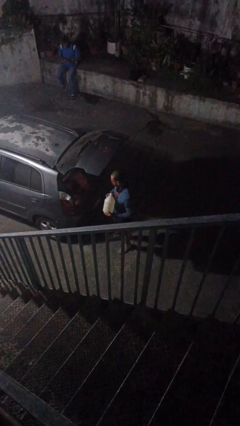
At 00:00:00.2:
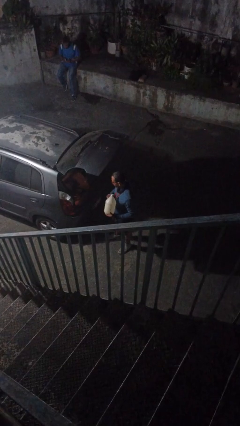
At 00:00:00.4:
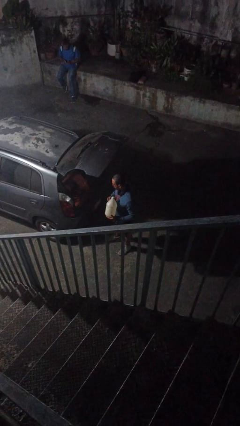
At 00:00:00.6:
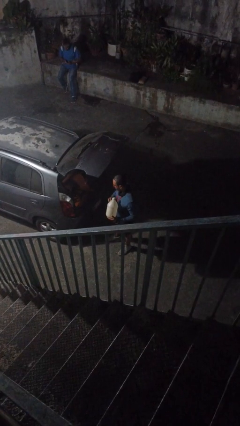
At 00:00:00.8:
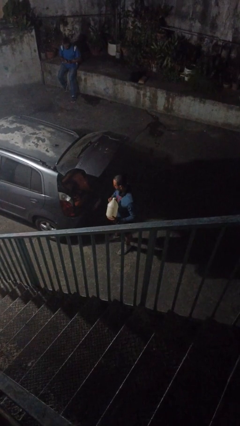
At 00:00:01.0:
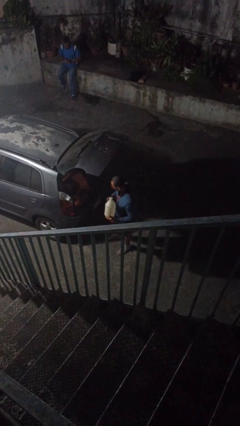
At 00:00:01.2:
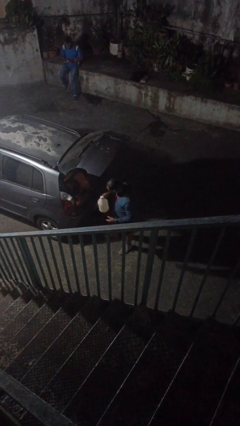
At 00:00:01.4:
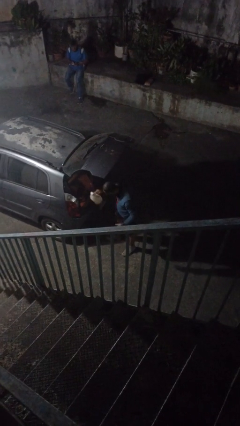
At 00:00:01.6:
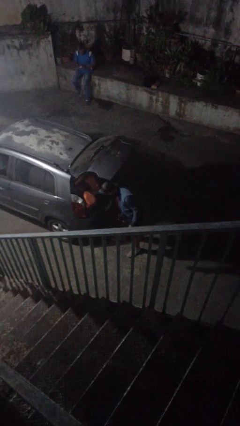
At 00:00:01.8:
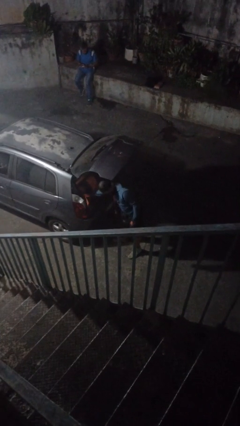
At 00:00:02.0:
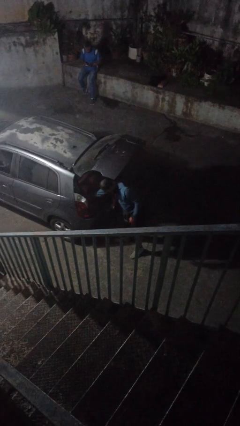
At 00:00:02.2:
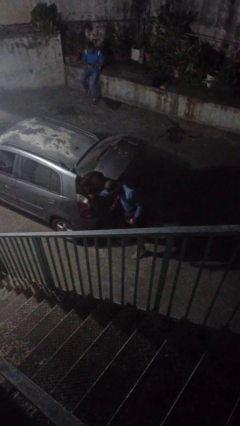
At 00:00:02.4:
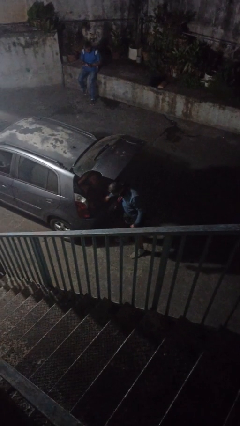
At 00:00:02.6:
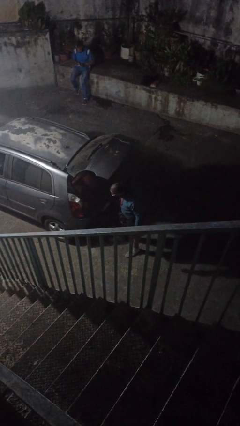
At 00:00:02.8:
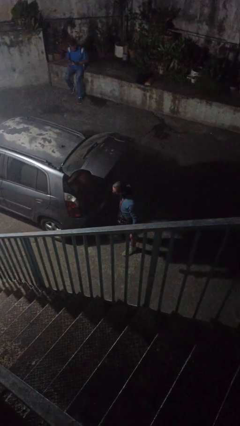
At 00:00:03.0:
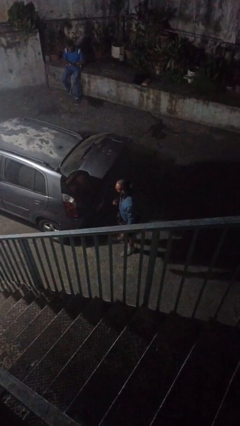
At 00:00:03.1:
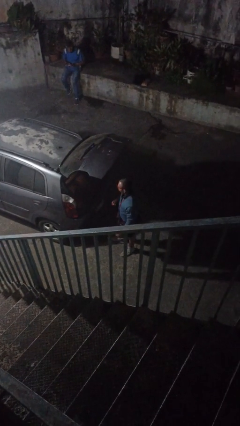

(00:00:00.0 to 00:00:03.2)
person loads car

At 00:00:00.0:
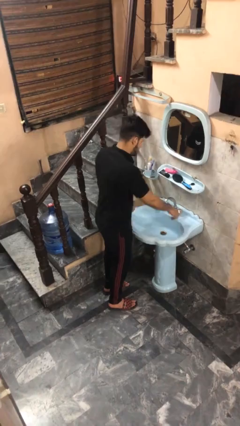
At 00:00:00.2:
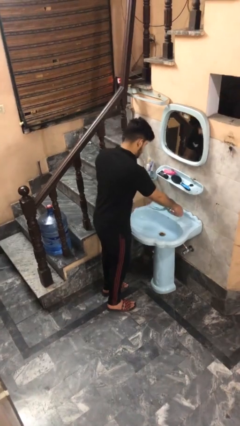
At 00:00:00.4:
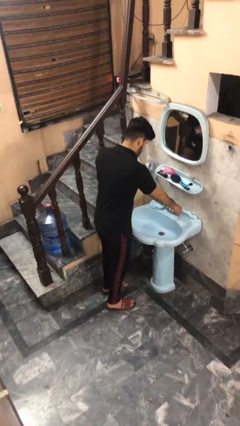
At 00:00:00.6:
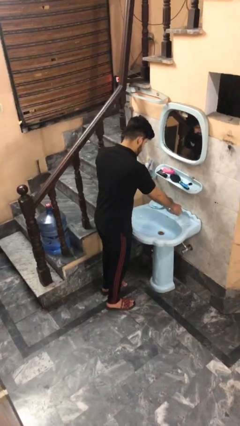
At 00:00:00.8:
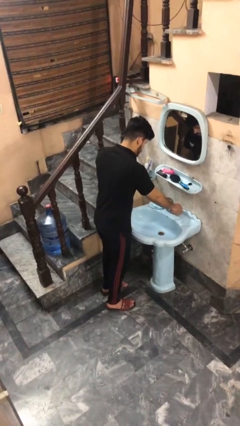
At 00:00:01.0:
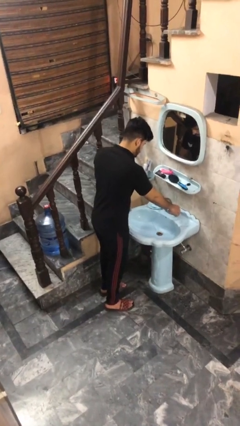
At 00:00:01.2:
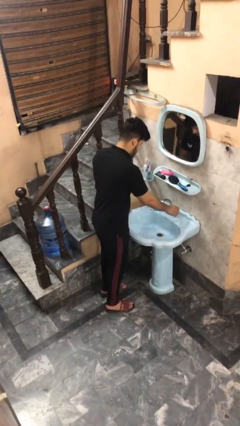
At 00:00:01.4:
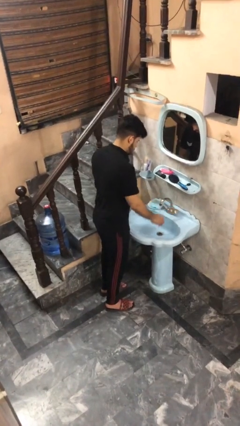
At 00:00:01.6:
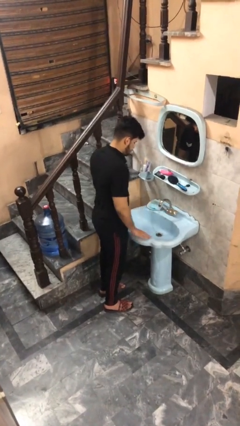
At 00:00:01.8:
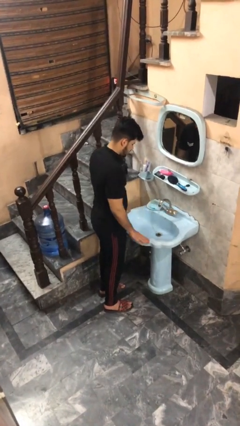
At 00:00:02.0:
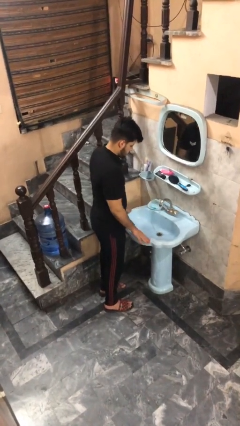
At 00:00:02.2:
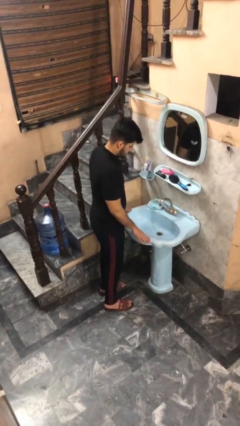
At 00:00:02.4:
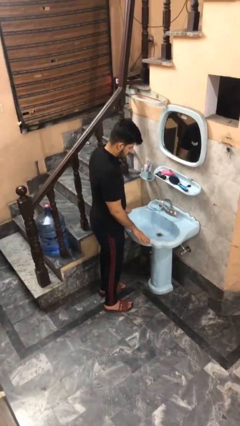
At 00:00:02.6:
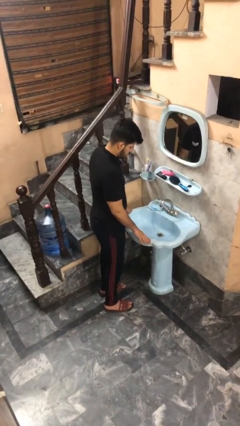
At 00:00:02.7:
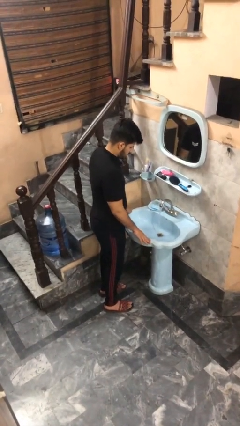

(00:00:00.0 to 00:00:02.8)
person turns on faucet

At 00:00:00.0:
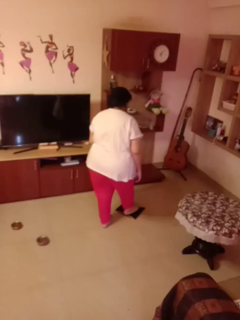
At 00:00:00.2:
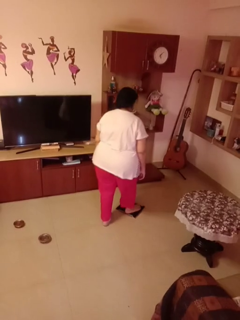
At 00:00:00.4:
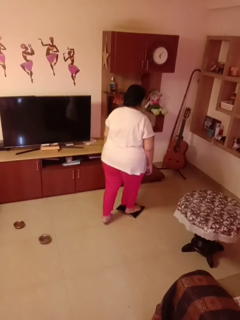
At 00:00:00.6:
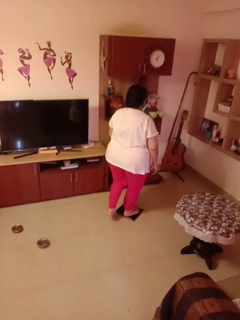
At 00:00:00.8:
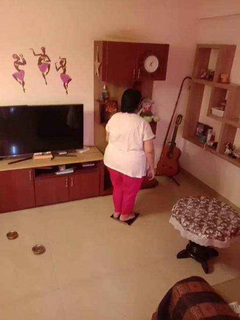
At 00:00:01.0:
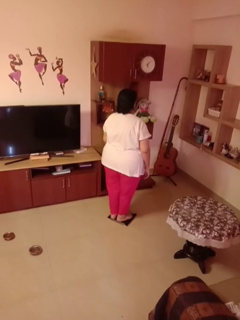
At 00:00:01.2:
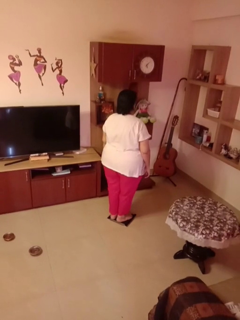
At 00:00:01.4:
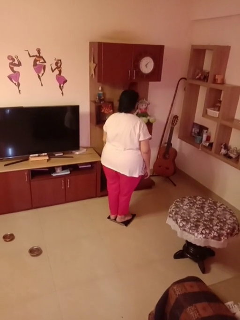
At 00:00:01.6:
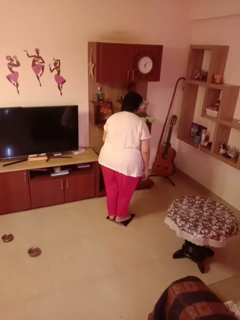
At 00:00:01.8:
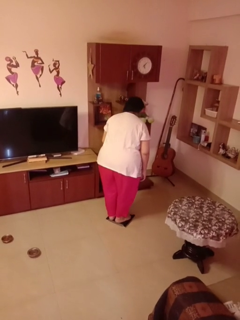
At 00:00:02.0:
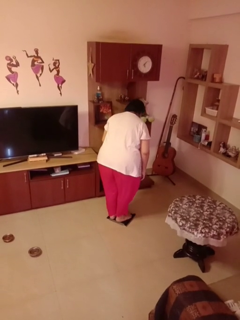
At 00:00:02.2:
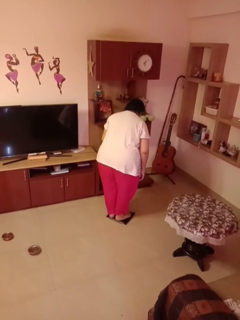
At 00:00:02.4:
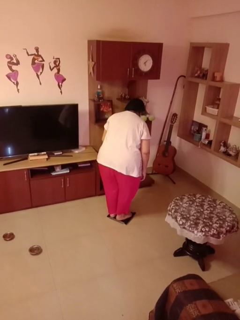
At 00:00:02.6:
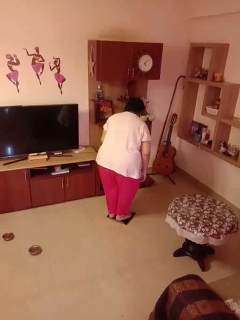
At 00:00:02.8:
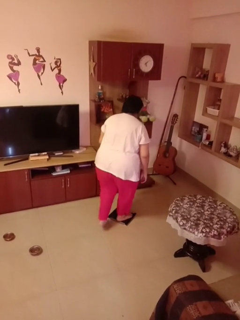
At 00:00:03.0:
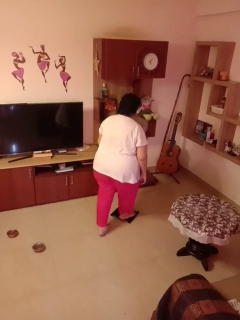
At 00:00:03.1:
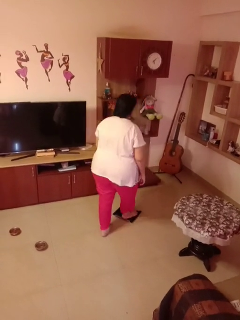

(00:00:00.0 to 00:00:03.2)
person uses bodyweight scale

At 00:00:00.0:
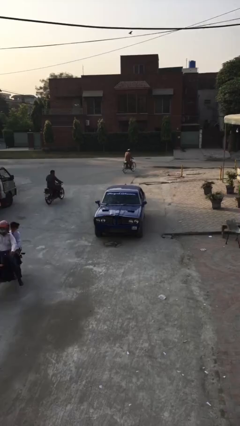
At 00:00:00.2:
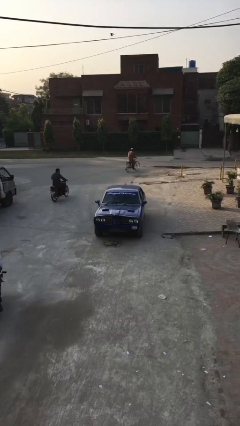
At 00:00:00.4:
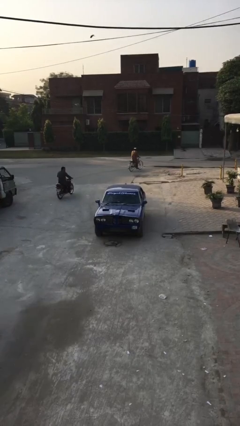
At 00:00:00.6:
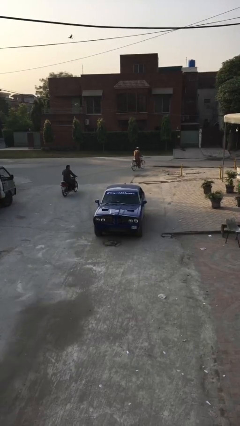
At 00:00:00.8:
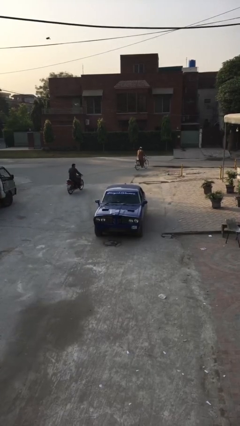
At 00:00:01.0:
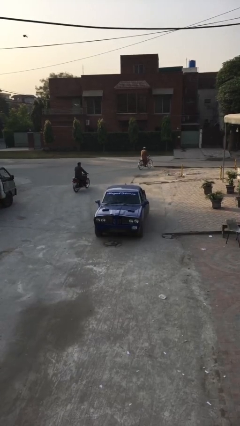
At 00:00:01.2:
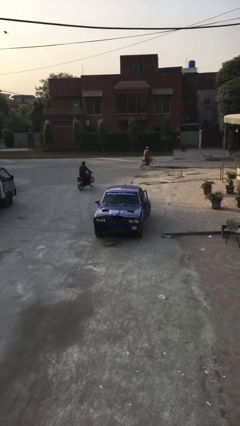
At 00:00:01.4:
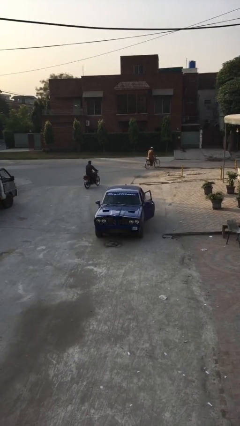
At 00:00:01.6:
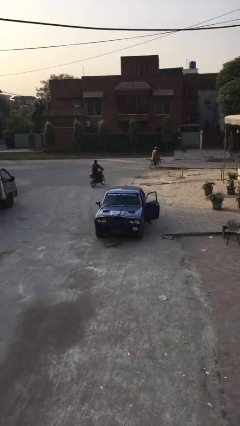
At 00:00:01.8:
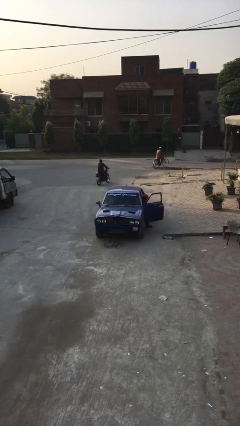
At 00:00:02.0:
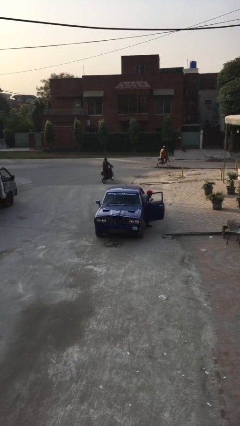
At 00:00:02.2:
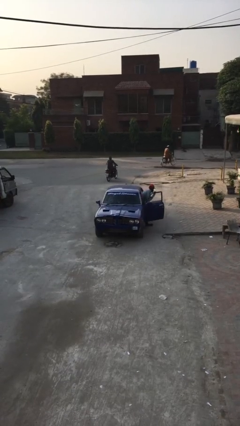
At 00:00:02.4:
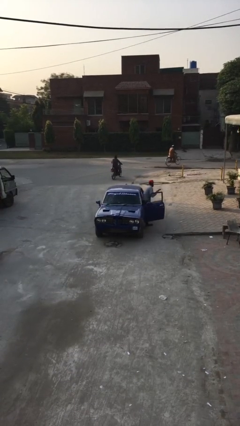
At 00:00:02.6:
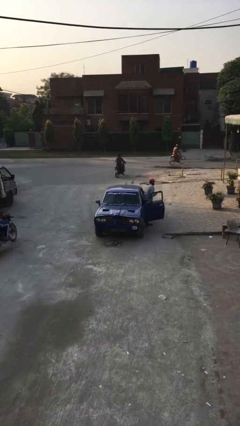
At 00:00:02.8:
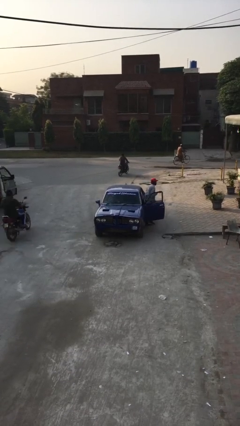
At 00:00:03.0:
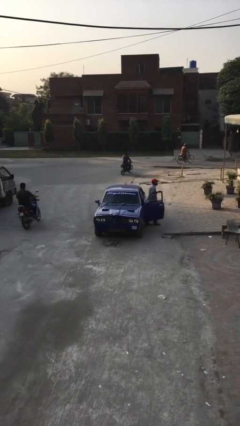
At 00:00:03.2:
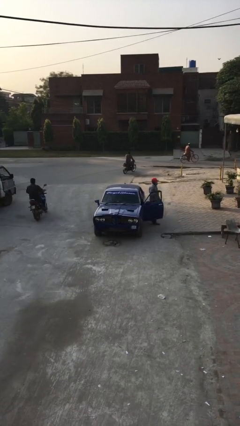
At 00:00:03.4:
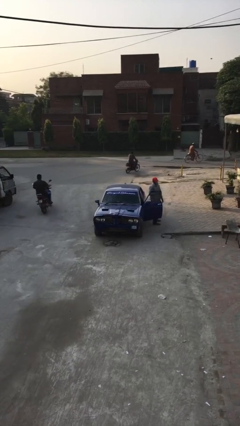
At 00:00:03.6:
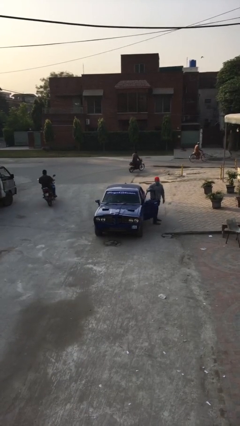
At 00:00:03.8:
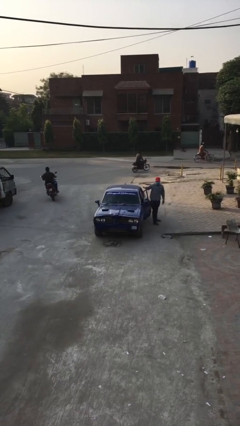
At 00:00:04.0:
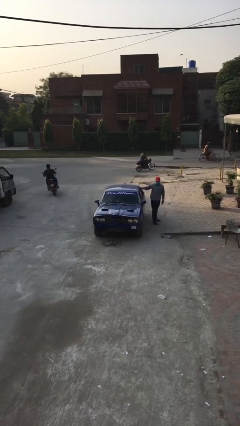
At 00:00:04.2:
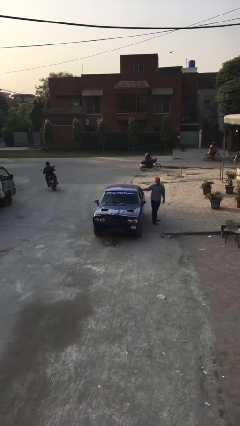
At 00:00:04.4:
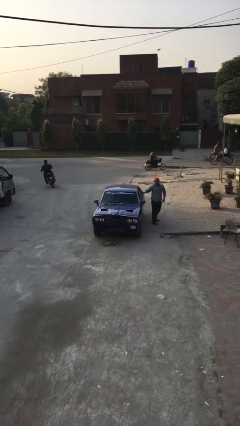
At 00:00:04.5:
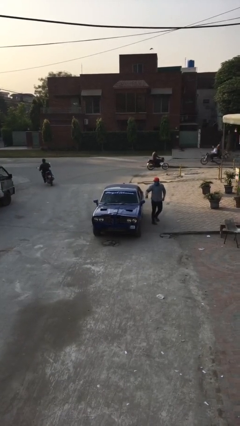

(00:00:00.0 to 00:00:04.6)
car drops off person

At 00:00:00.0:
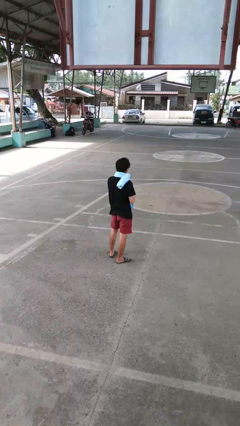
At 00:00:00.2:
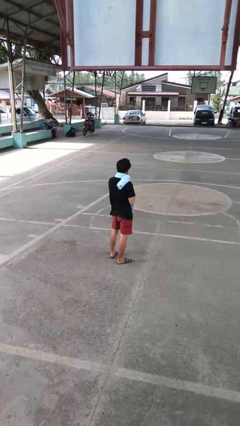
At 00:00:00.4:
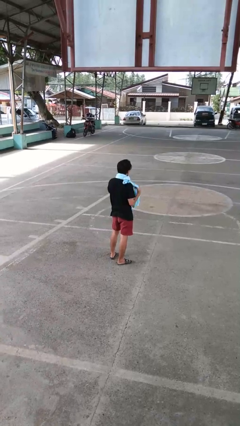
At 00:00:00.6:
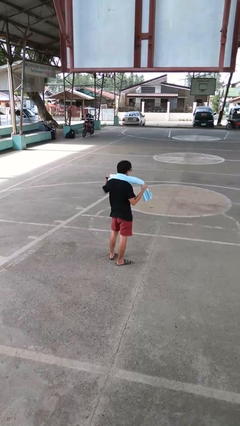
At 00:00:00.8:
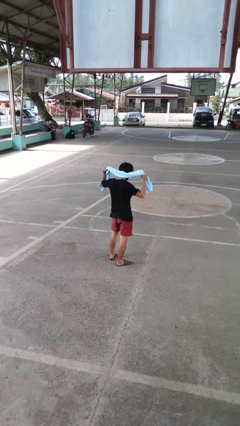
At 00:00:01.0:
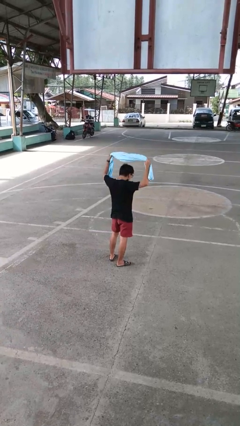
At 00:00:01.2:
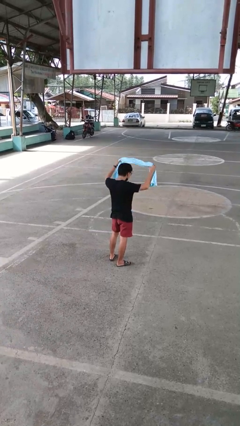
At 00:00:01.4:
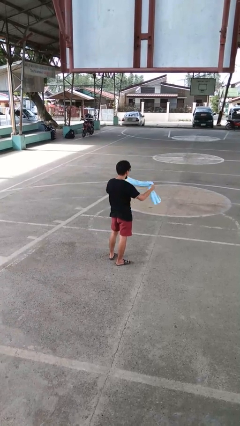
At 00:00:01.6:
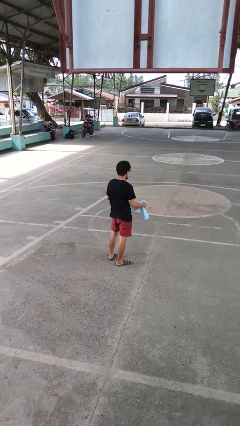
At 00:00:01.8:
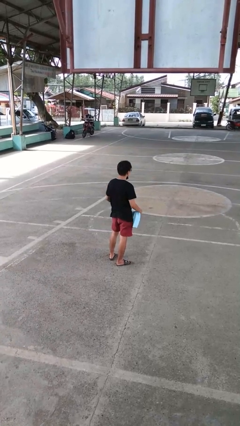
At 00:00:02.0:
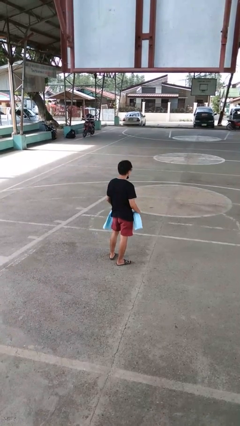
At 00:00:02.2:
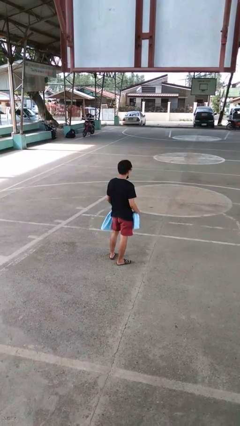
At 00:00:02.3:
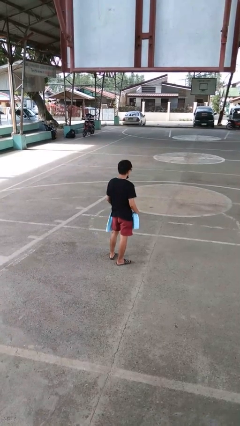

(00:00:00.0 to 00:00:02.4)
person takes off scarf

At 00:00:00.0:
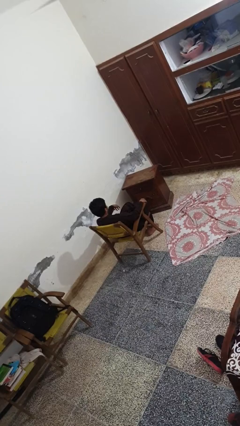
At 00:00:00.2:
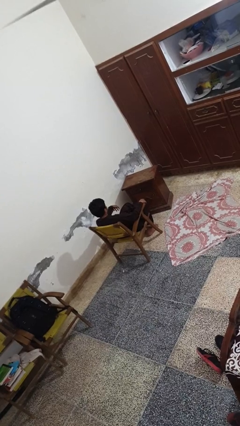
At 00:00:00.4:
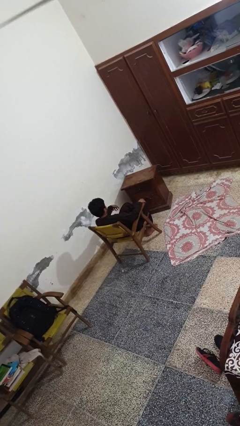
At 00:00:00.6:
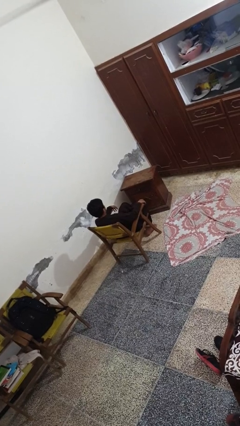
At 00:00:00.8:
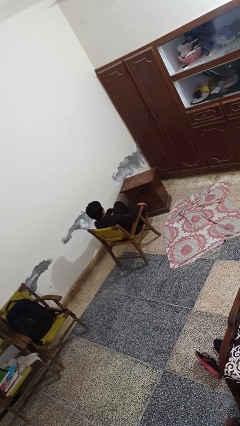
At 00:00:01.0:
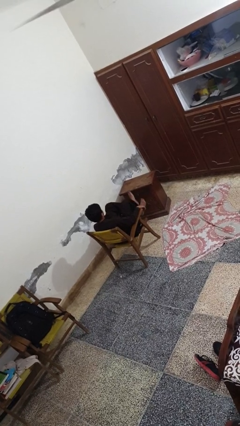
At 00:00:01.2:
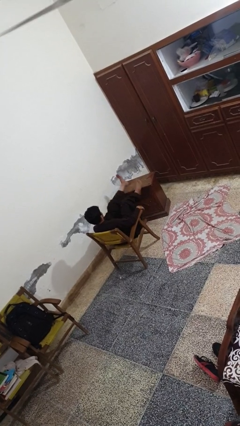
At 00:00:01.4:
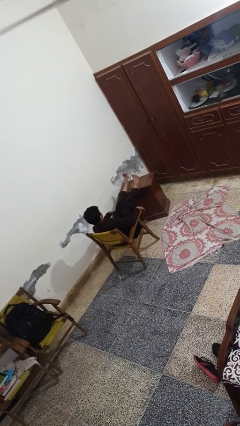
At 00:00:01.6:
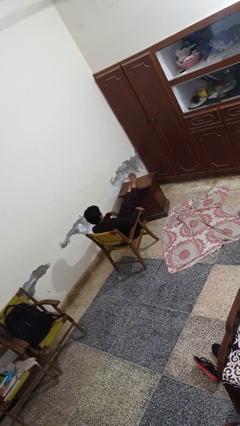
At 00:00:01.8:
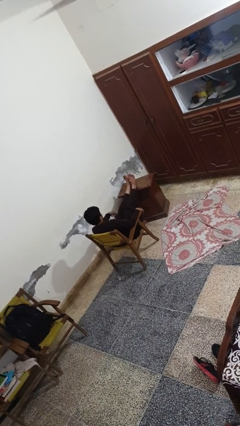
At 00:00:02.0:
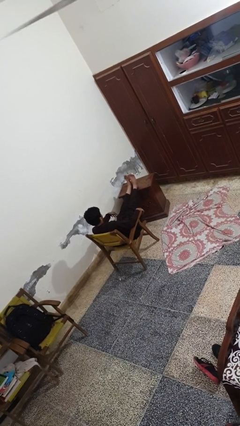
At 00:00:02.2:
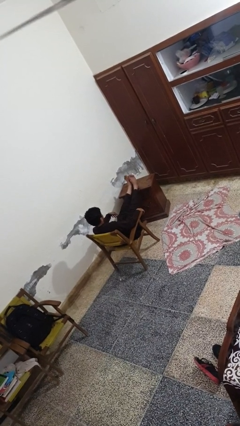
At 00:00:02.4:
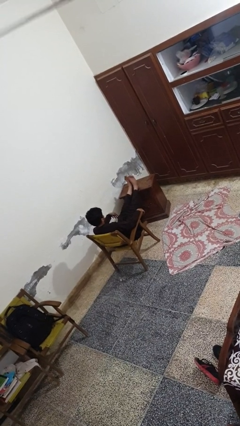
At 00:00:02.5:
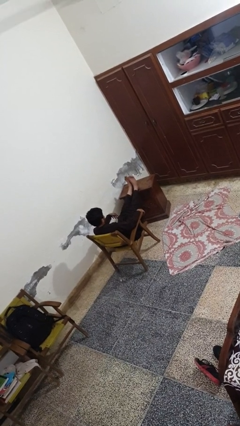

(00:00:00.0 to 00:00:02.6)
person puts feet up
